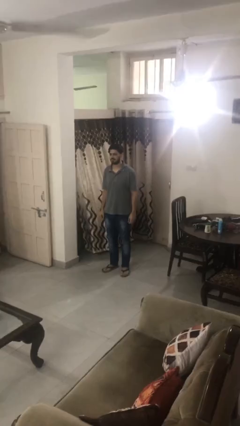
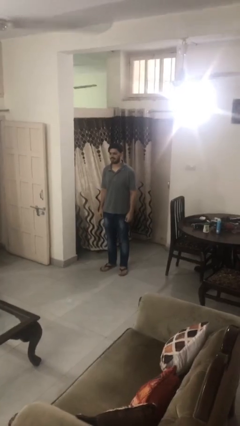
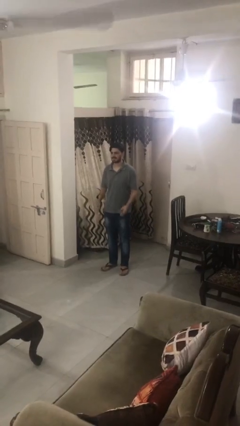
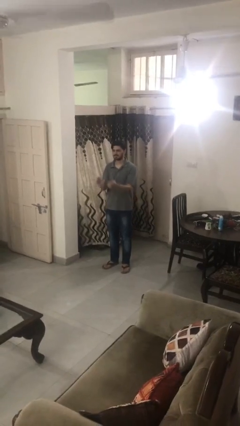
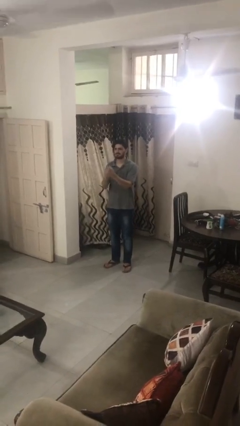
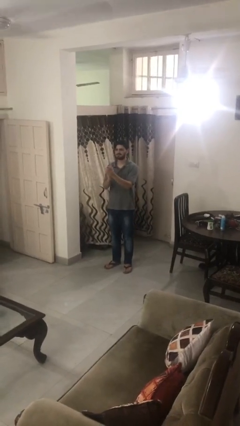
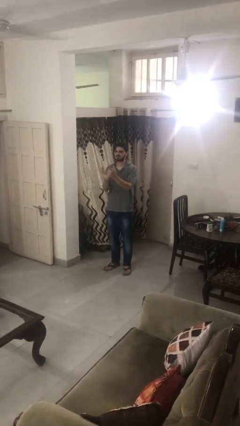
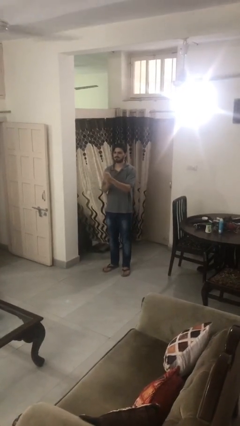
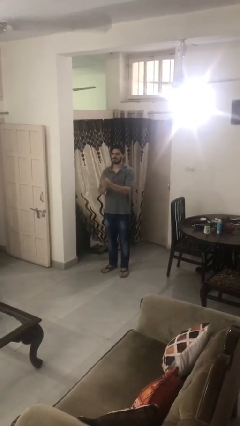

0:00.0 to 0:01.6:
person claps hands

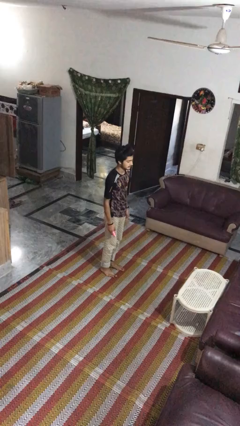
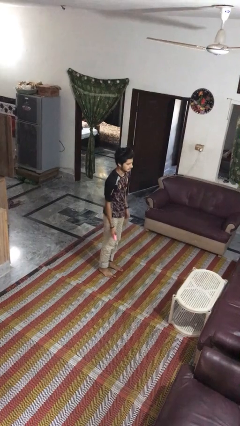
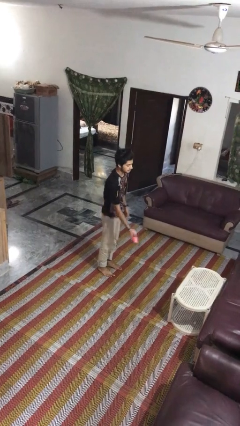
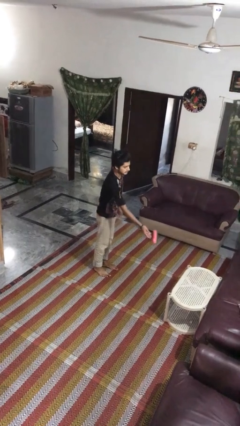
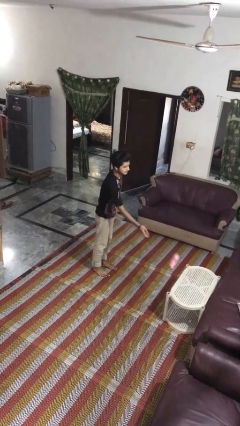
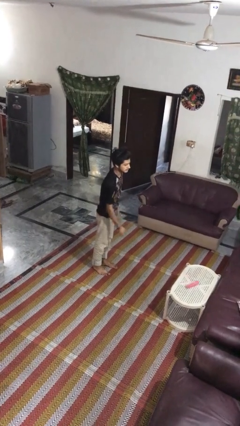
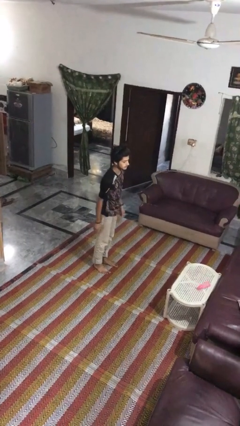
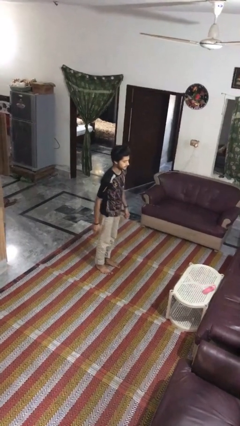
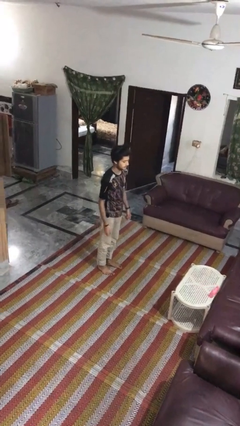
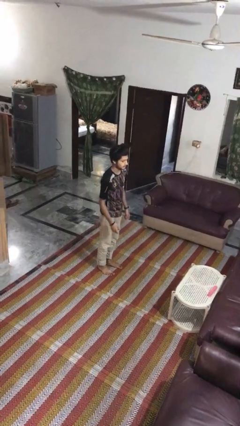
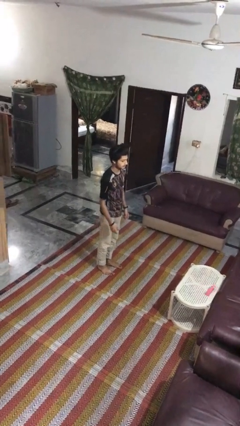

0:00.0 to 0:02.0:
person throws object on table

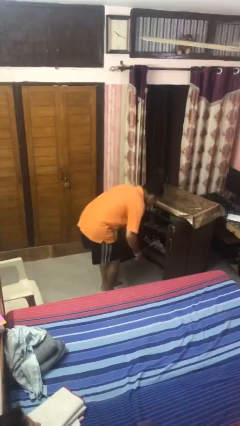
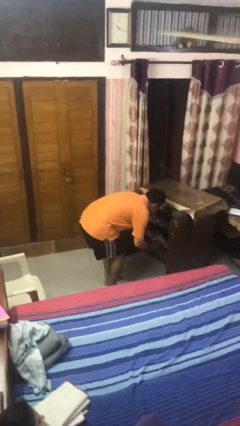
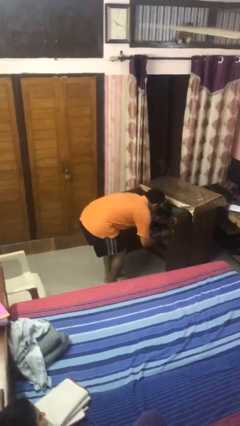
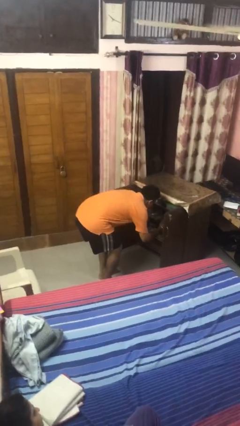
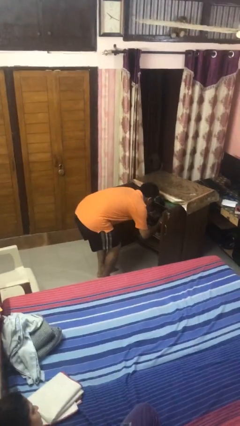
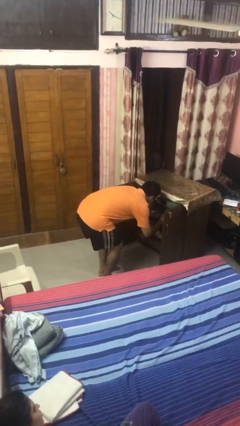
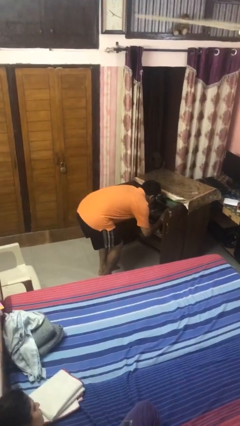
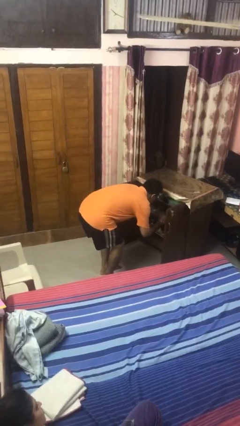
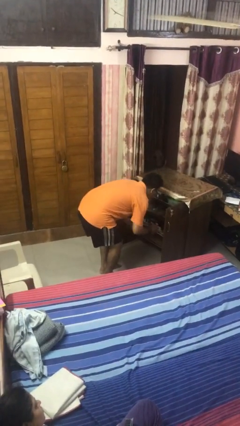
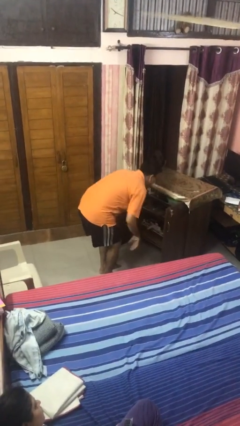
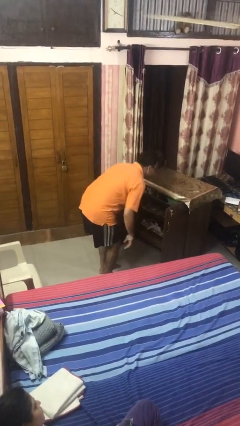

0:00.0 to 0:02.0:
person searches in cabinet

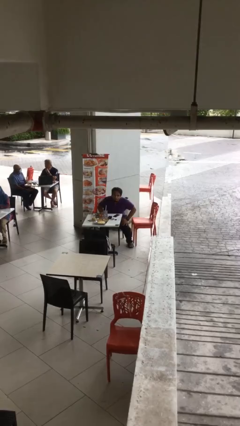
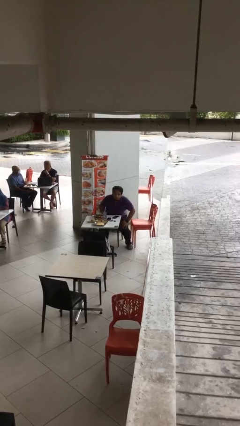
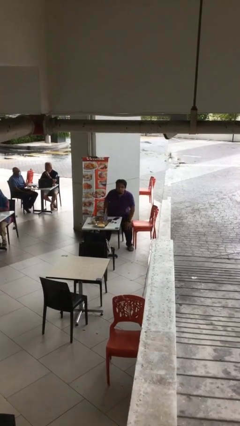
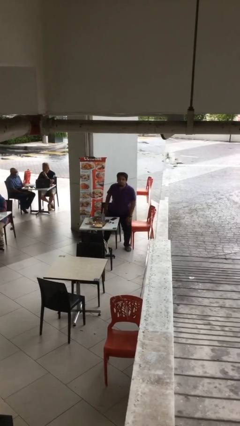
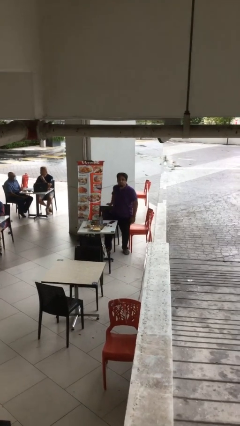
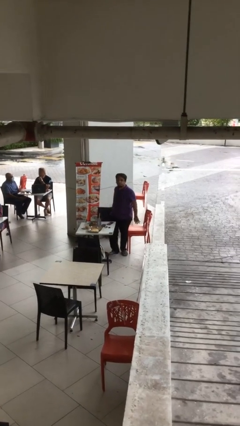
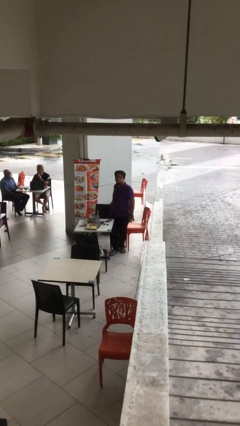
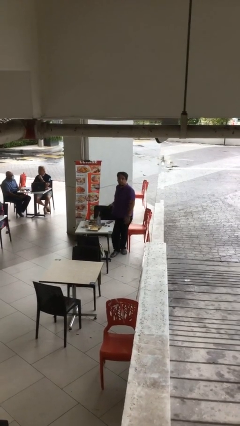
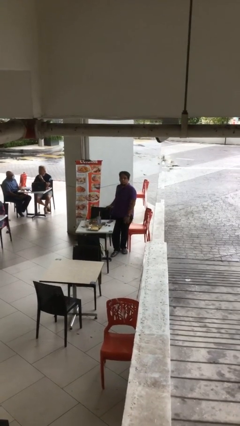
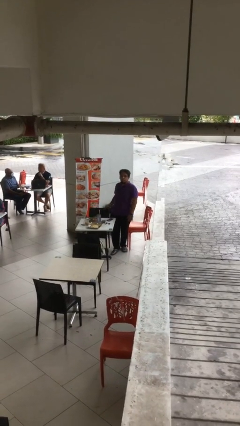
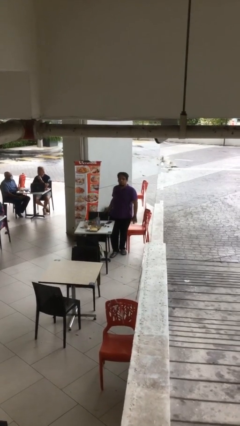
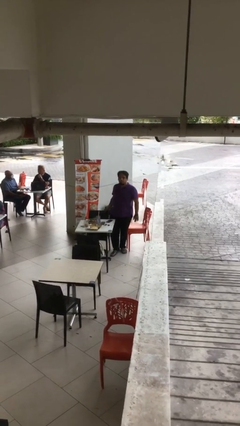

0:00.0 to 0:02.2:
person stands up

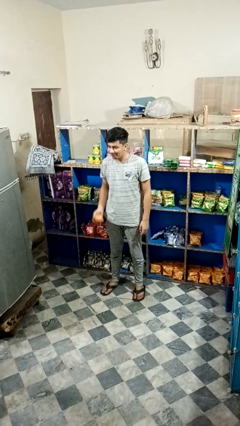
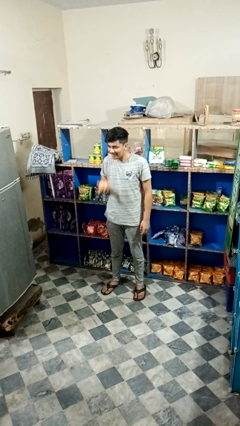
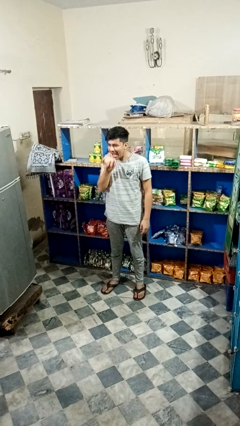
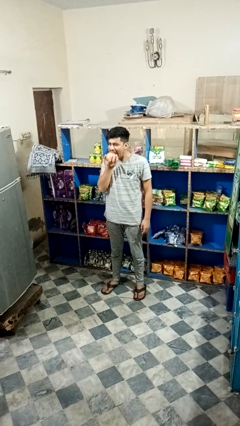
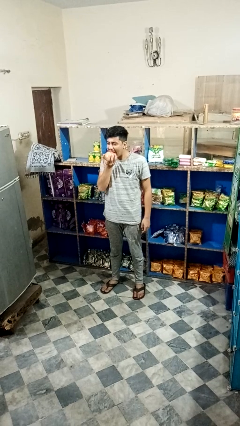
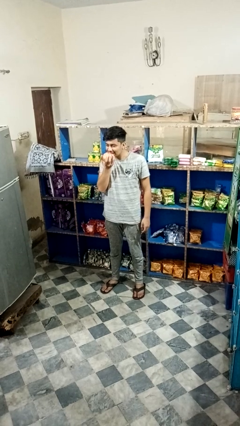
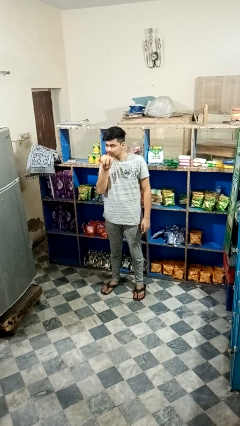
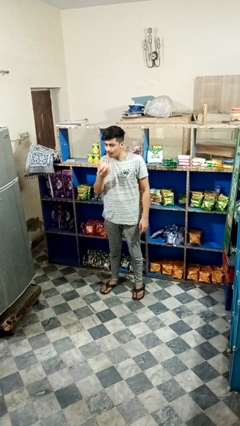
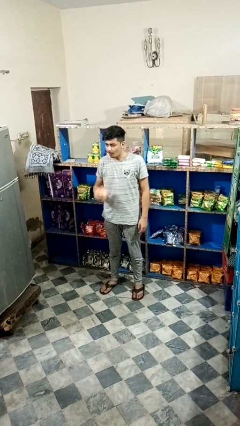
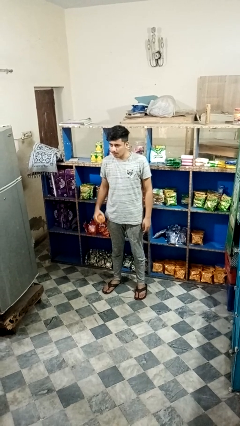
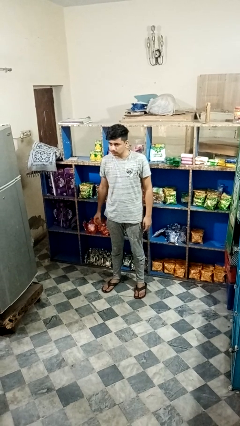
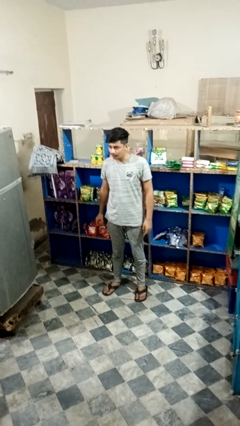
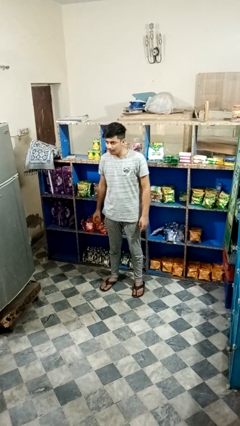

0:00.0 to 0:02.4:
person eats apple

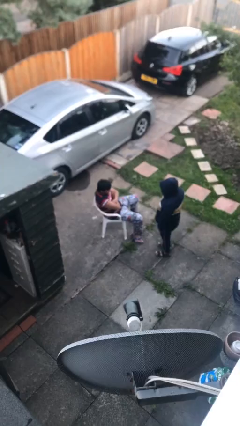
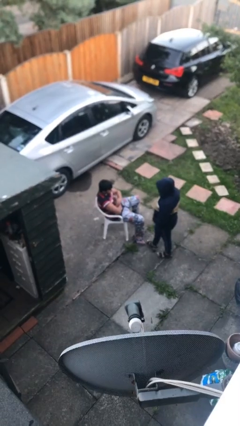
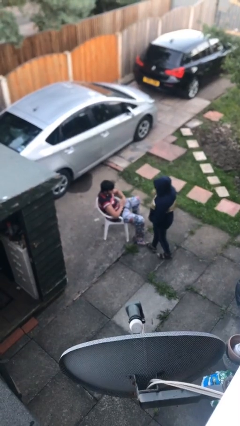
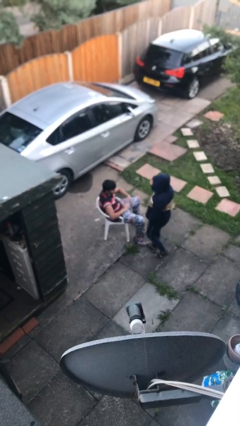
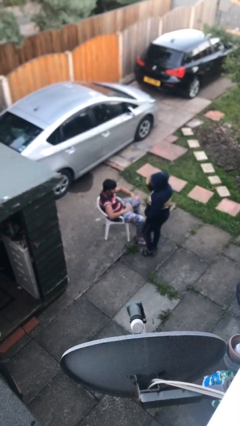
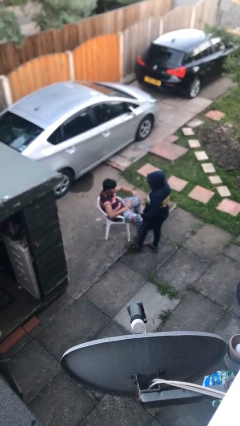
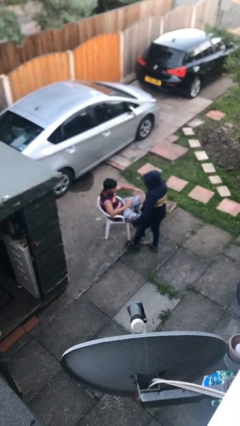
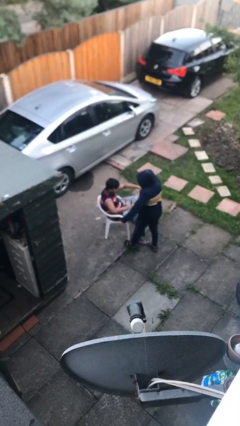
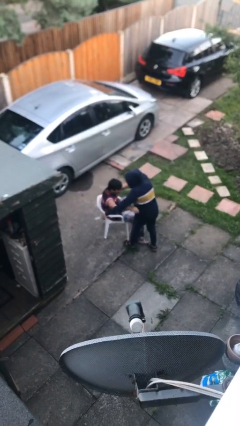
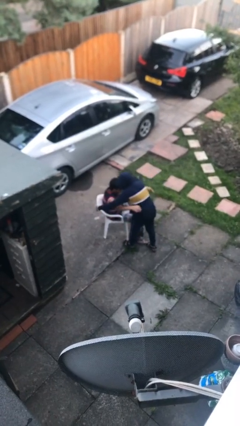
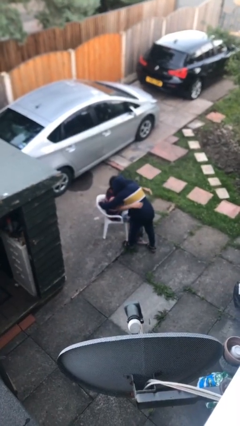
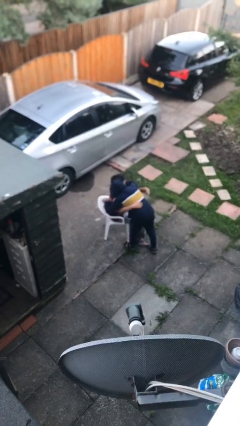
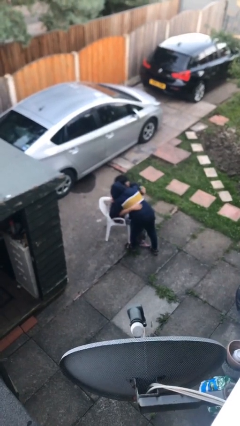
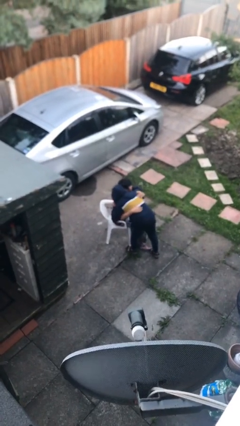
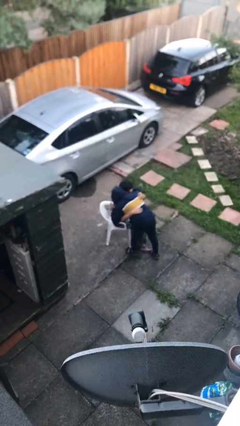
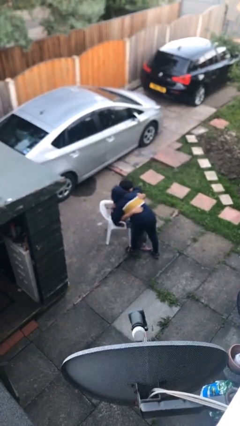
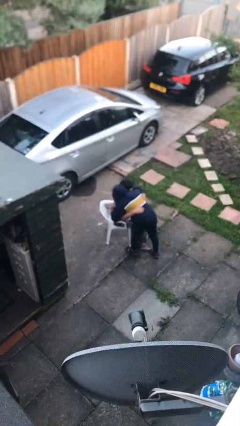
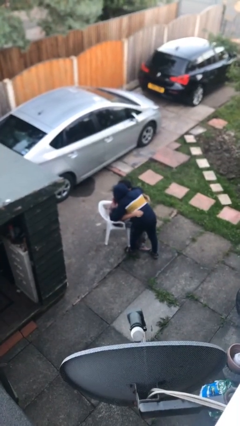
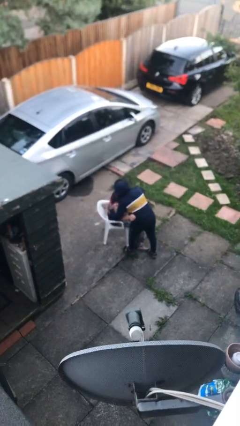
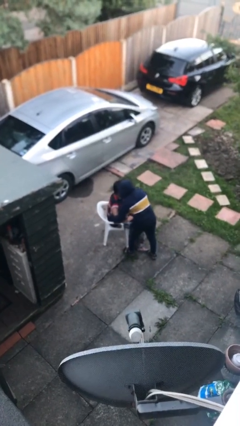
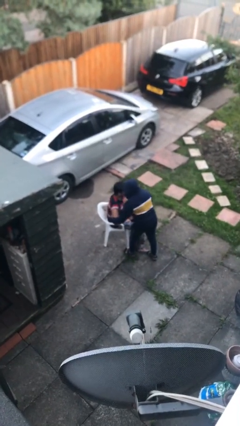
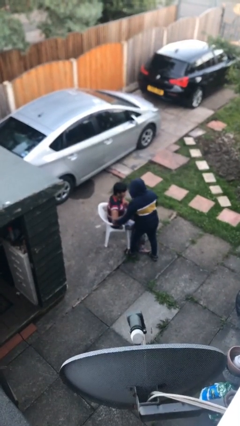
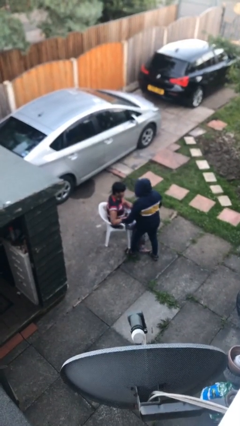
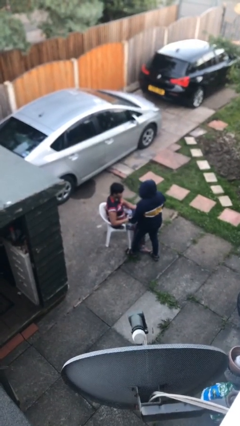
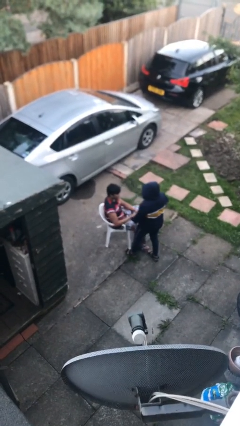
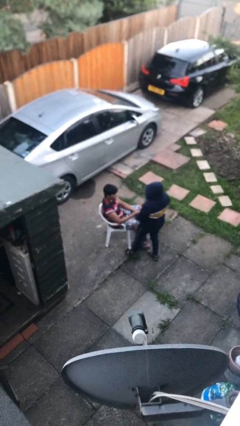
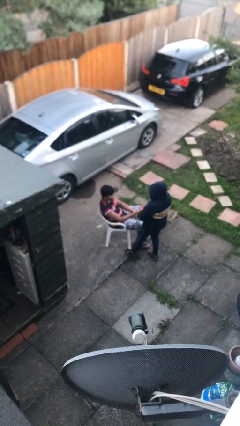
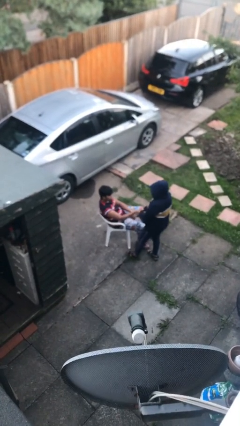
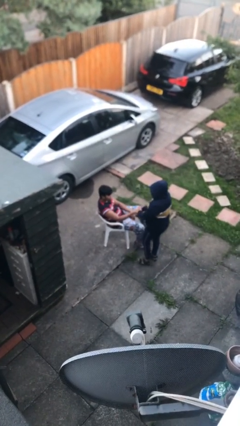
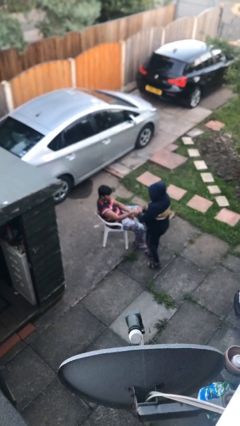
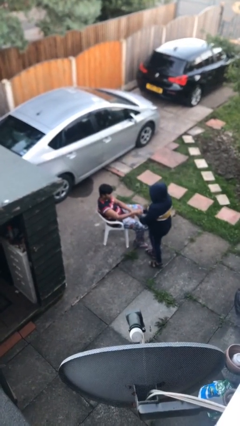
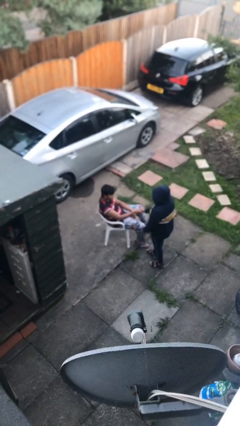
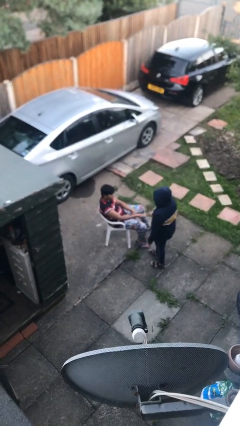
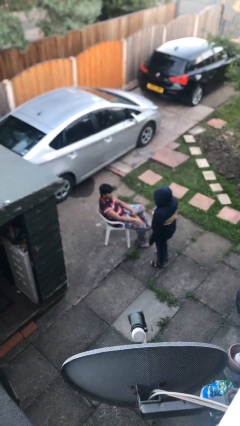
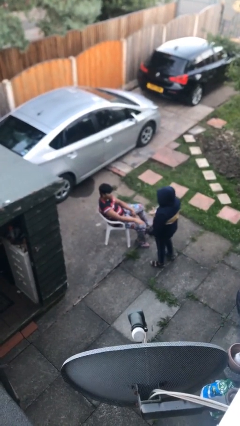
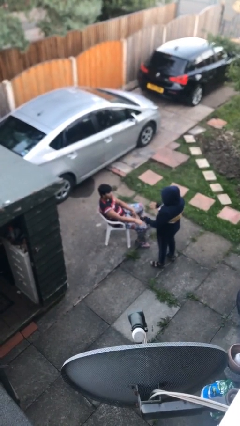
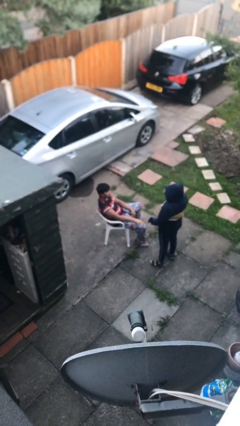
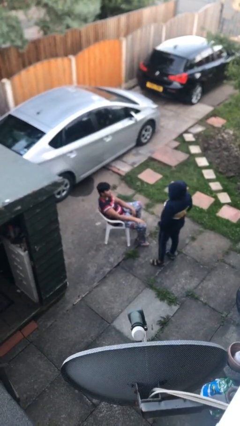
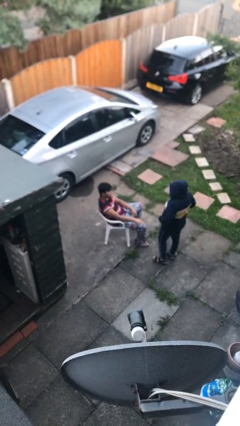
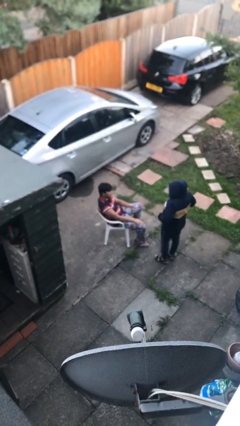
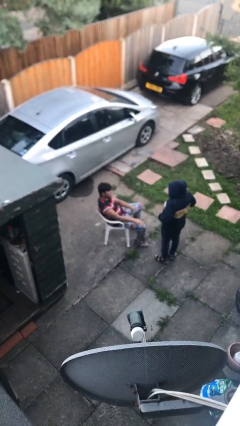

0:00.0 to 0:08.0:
person embraces person
